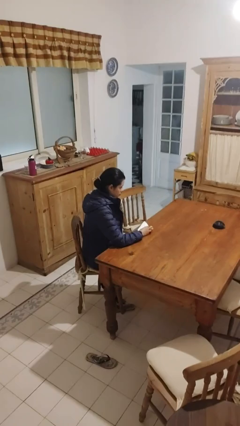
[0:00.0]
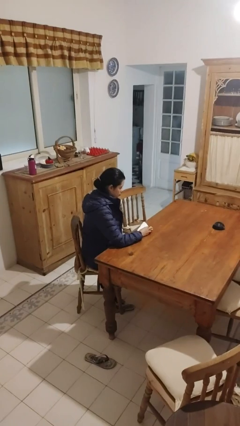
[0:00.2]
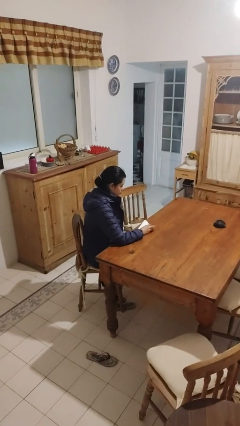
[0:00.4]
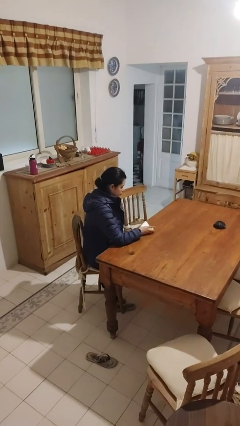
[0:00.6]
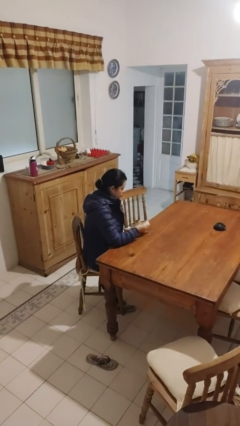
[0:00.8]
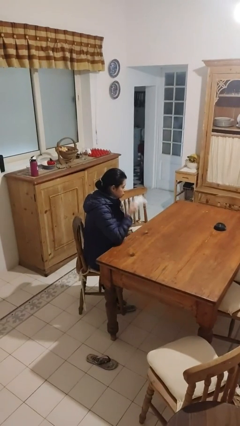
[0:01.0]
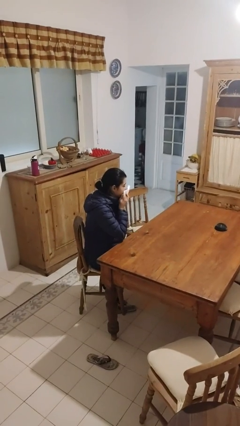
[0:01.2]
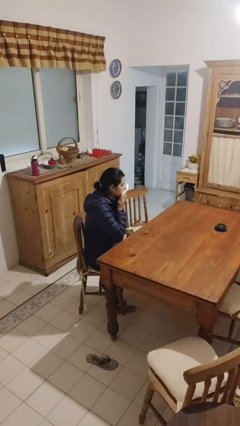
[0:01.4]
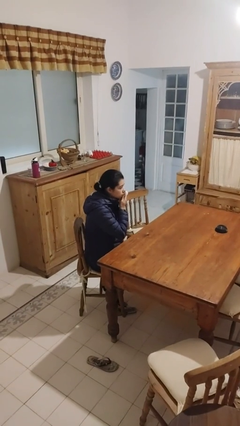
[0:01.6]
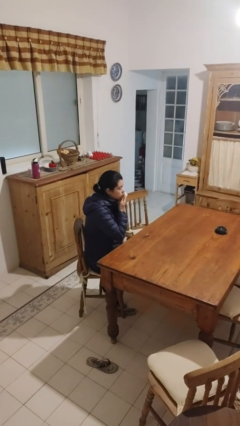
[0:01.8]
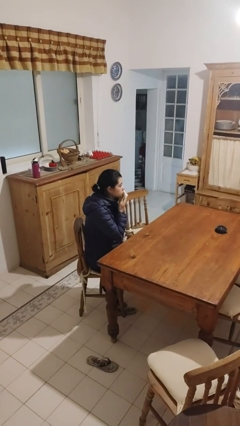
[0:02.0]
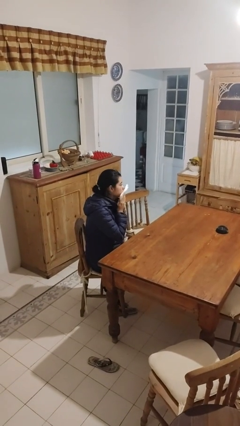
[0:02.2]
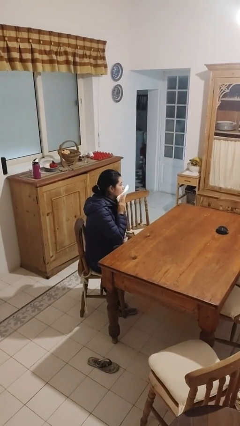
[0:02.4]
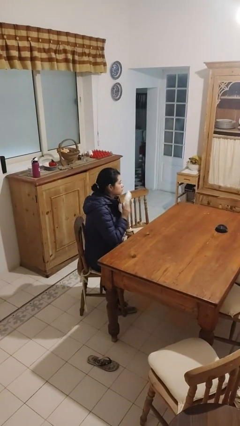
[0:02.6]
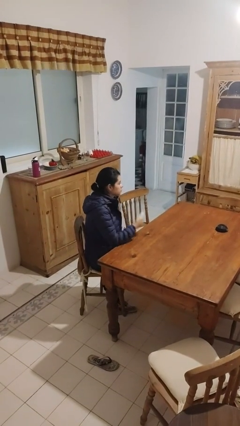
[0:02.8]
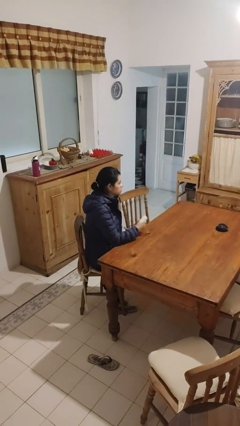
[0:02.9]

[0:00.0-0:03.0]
person wipes mouth with napkin

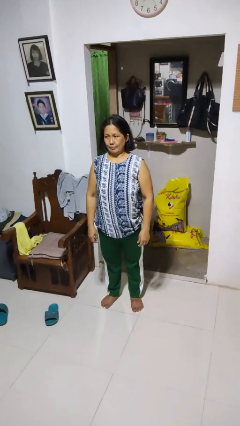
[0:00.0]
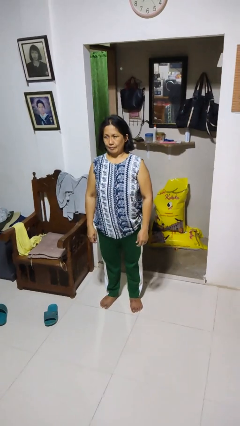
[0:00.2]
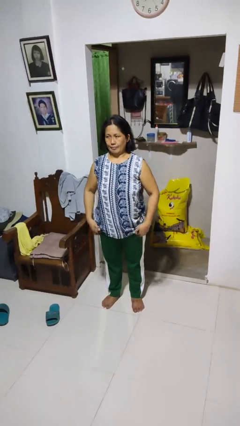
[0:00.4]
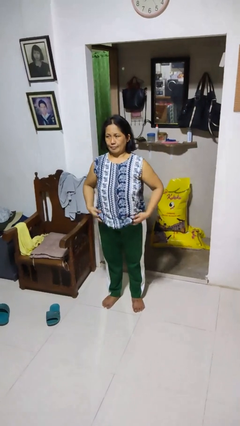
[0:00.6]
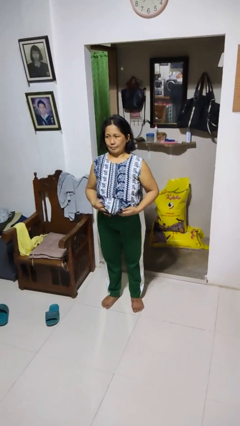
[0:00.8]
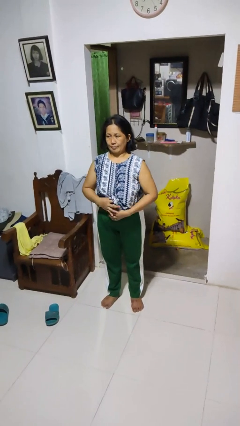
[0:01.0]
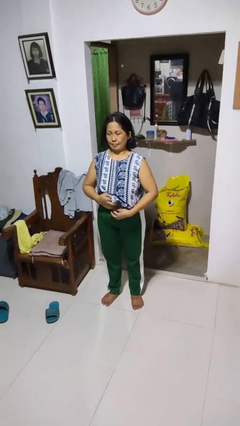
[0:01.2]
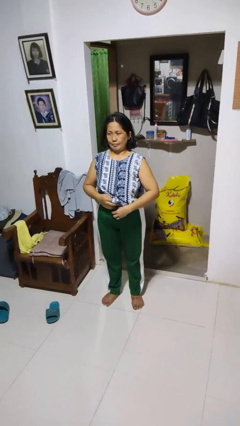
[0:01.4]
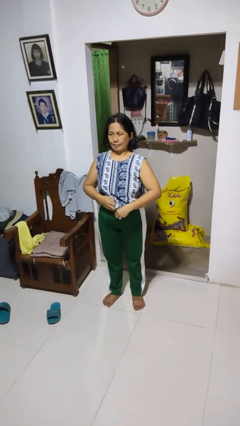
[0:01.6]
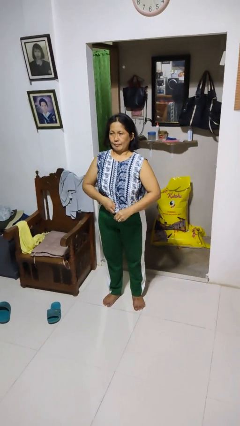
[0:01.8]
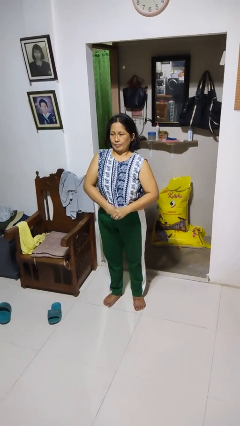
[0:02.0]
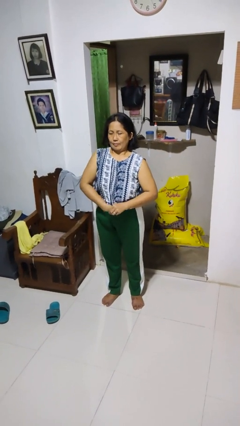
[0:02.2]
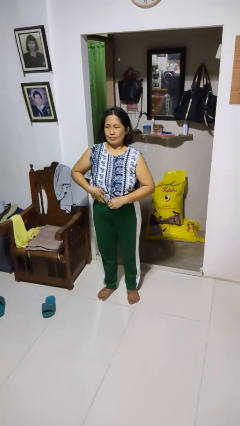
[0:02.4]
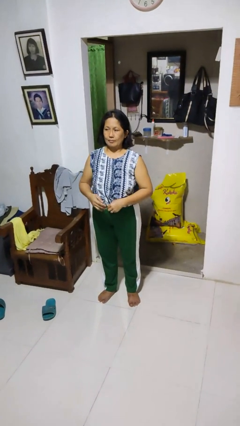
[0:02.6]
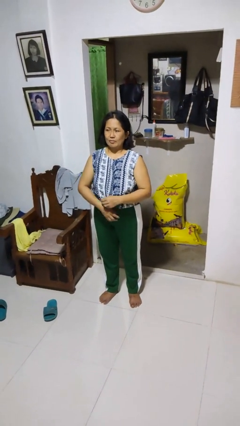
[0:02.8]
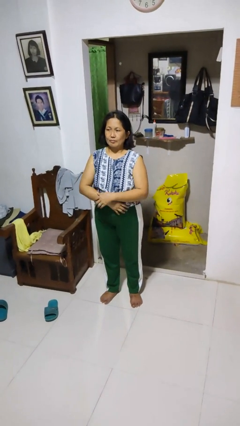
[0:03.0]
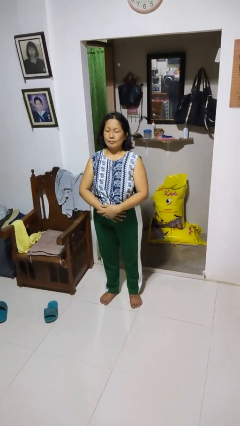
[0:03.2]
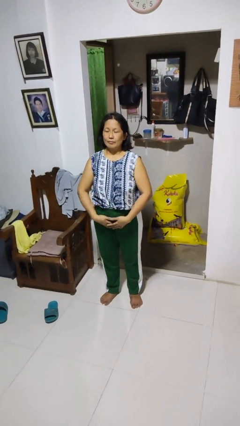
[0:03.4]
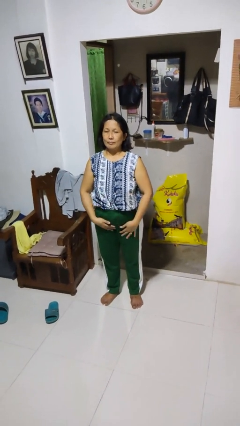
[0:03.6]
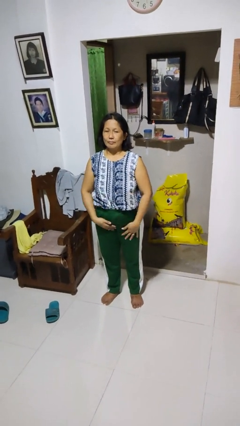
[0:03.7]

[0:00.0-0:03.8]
person tucks in shirt

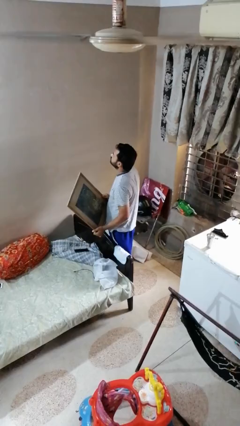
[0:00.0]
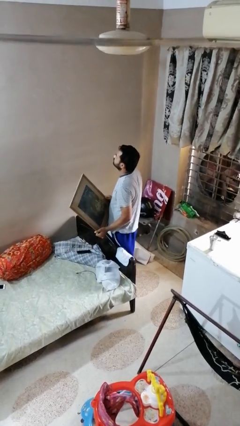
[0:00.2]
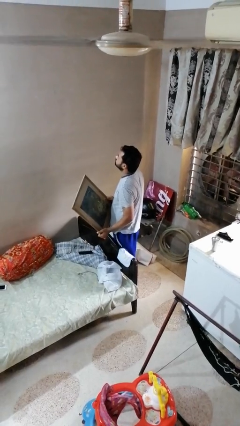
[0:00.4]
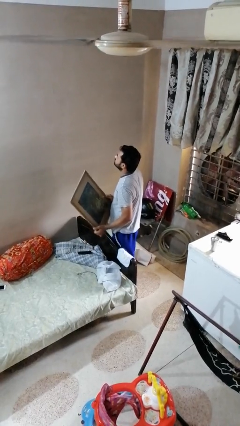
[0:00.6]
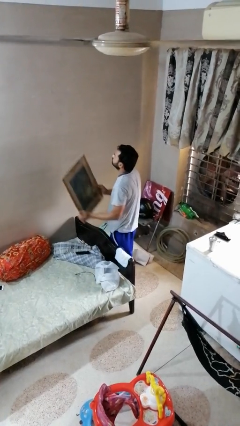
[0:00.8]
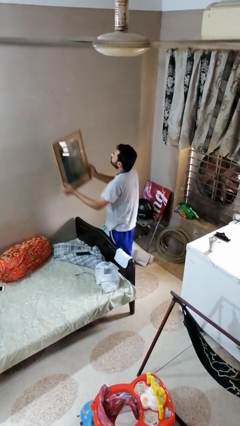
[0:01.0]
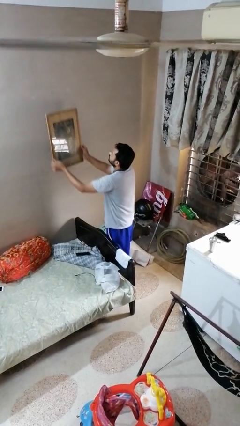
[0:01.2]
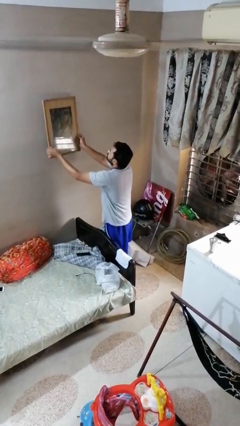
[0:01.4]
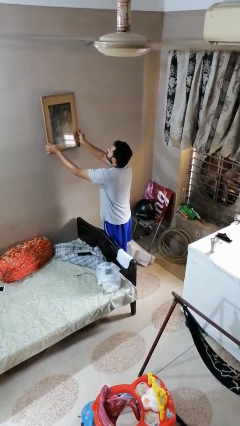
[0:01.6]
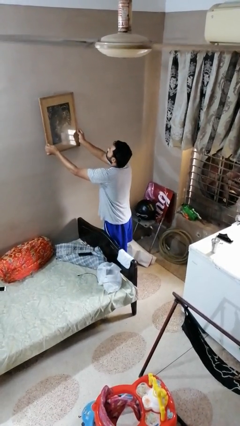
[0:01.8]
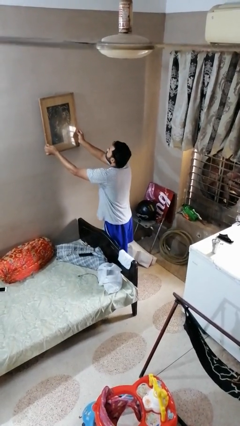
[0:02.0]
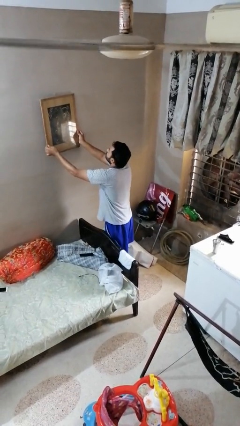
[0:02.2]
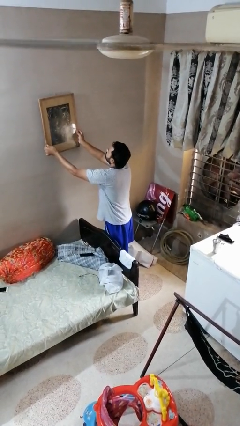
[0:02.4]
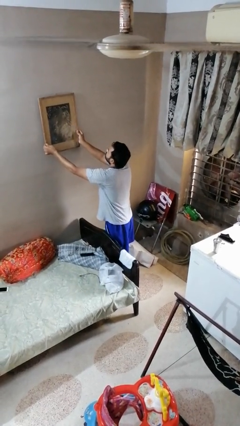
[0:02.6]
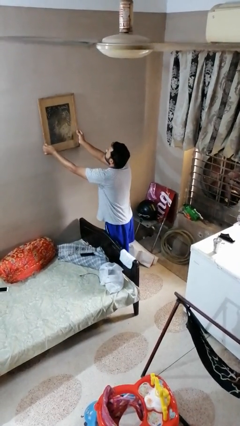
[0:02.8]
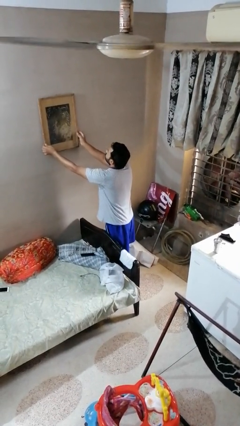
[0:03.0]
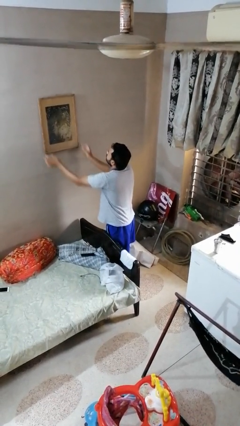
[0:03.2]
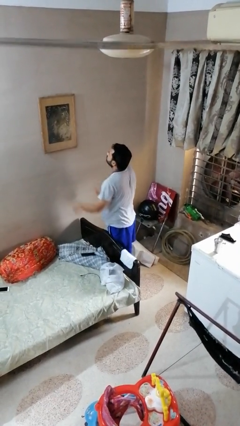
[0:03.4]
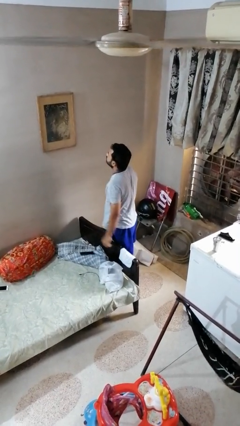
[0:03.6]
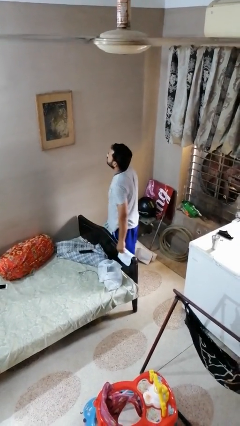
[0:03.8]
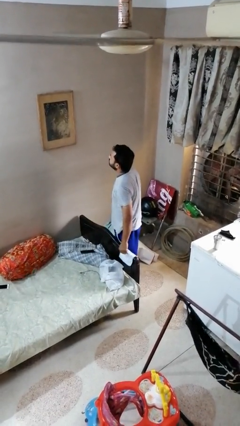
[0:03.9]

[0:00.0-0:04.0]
person puts up picture frame

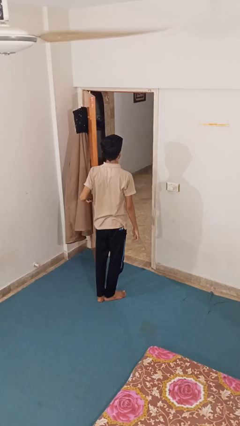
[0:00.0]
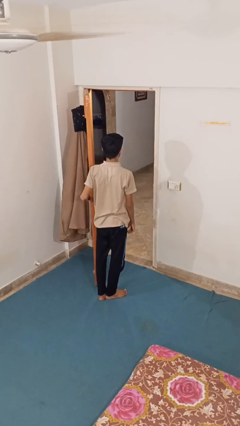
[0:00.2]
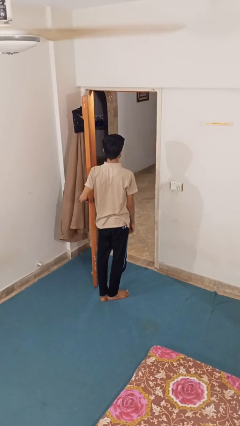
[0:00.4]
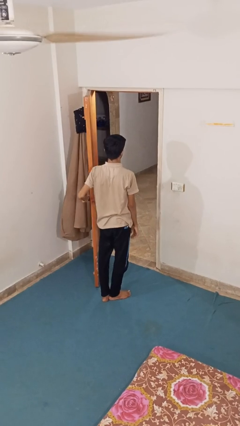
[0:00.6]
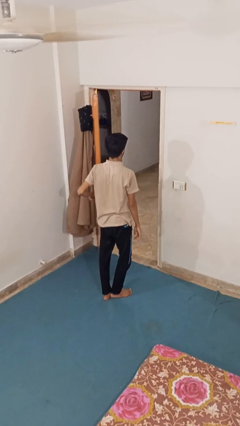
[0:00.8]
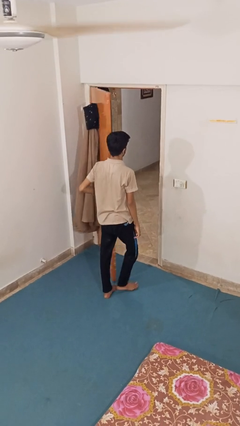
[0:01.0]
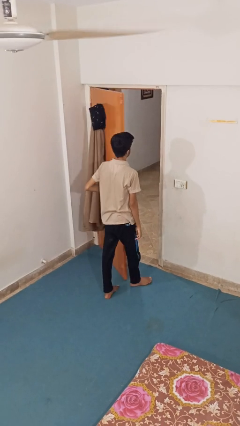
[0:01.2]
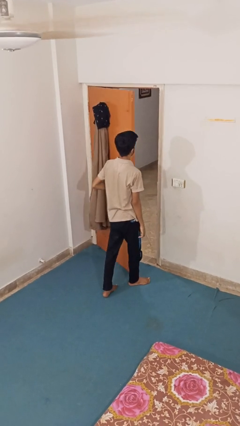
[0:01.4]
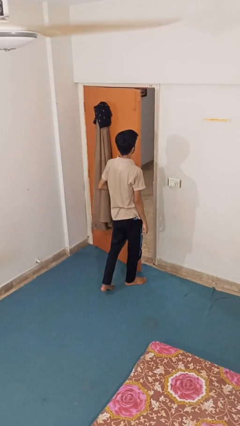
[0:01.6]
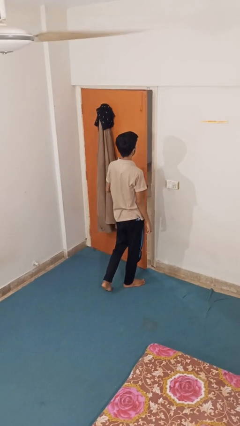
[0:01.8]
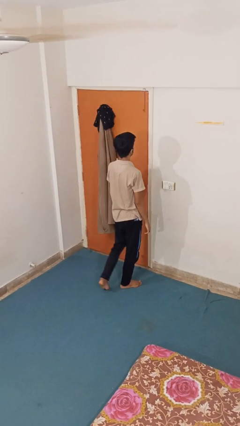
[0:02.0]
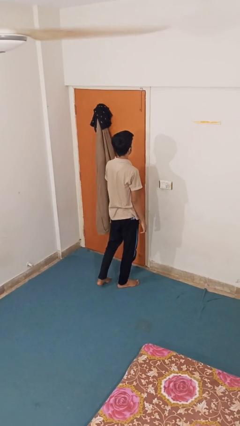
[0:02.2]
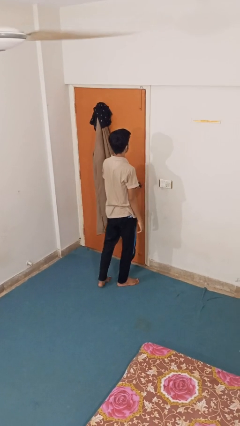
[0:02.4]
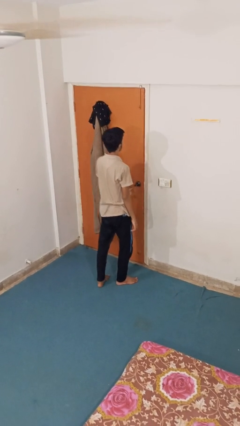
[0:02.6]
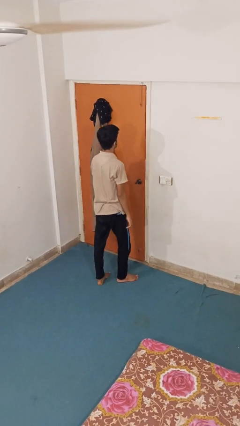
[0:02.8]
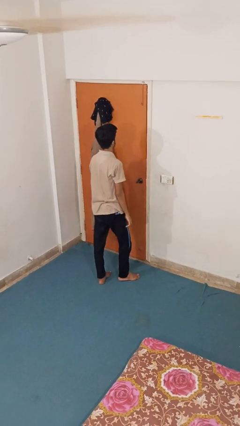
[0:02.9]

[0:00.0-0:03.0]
person closes facility door

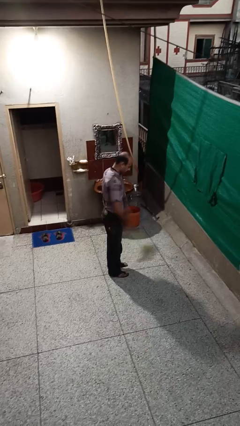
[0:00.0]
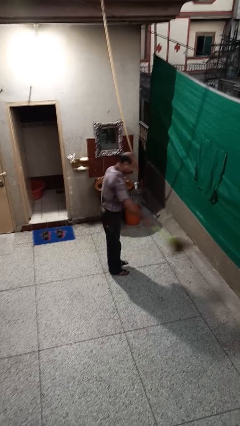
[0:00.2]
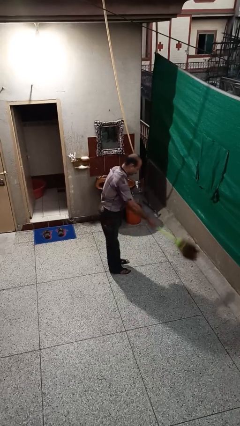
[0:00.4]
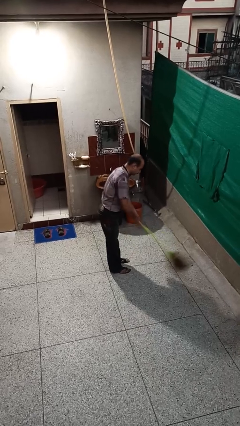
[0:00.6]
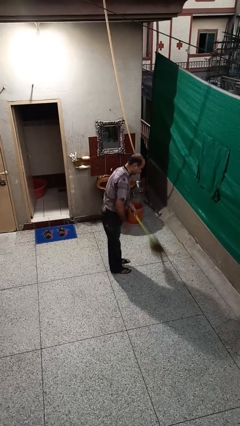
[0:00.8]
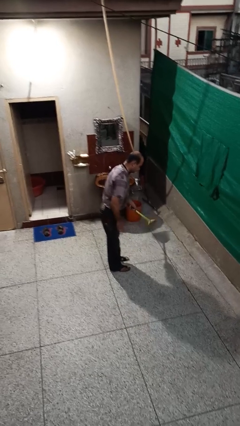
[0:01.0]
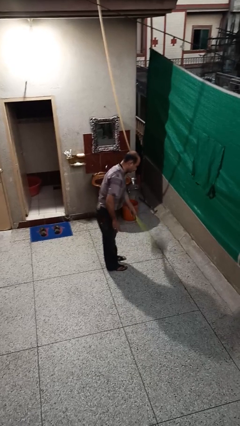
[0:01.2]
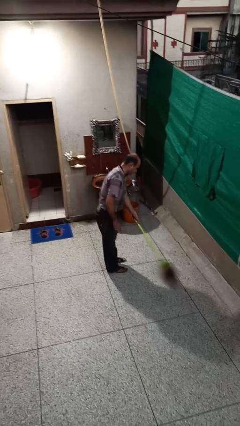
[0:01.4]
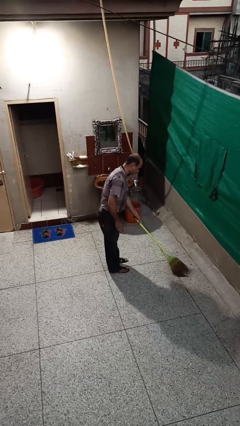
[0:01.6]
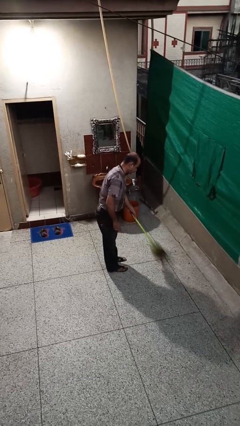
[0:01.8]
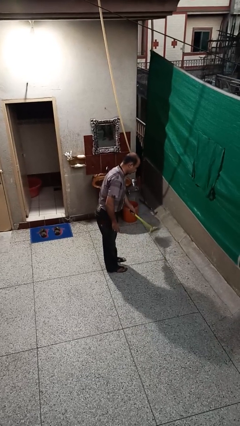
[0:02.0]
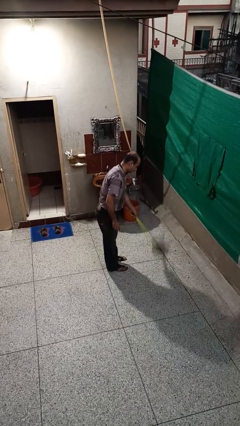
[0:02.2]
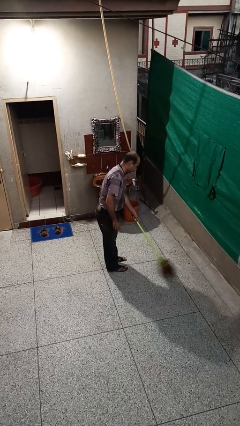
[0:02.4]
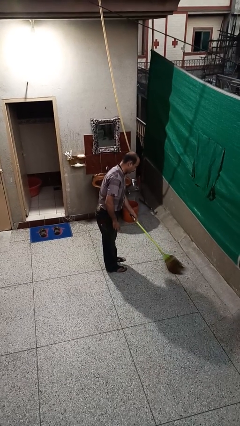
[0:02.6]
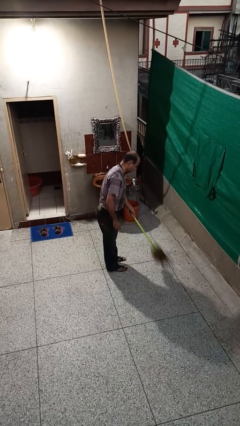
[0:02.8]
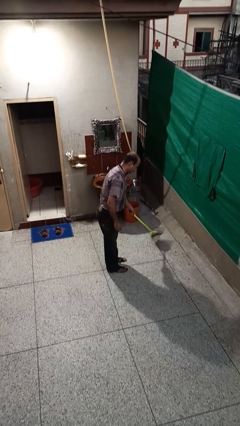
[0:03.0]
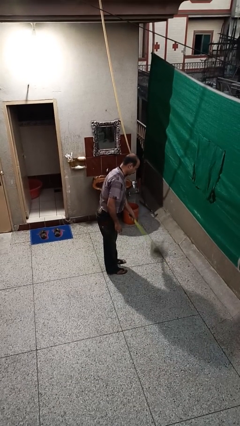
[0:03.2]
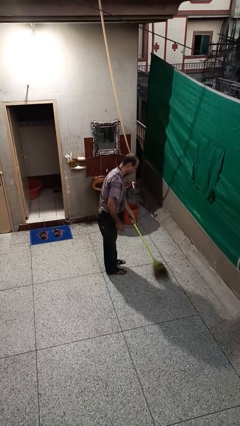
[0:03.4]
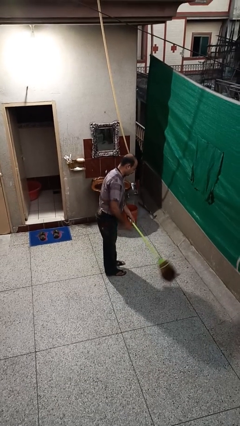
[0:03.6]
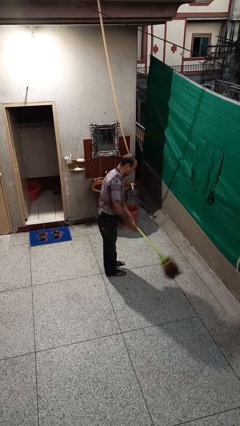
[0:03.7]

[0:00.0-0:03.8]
person sweeps floor

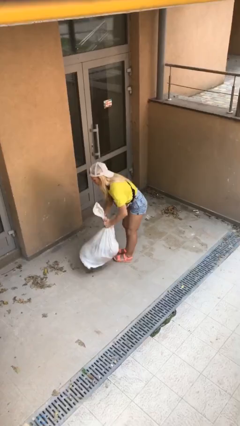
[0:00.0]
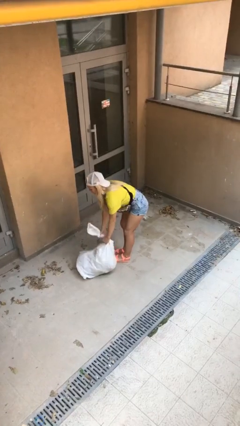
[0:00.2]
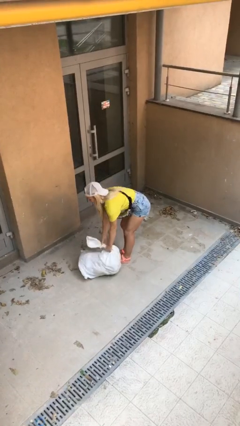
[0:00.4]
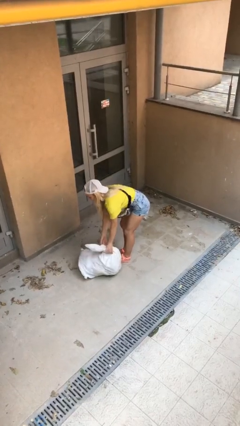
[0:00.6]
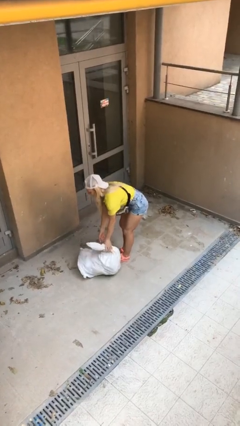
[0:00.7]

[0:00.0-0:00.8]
person puts down object on floor
